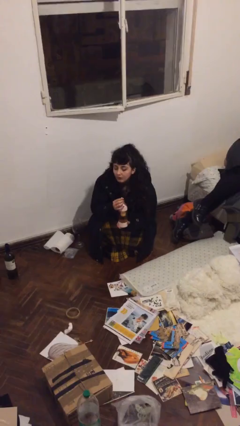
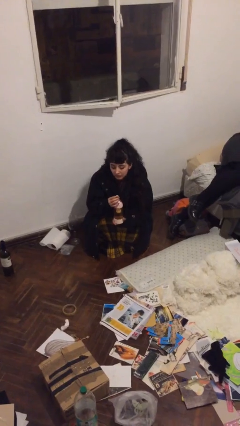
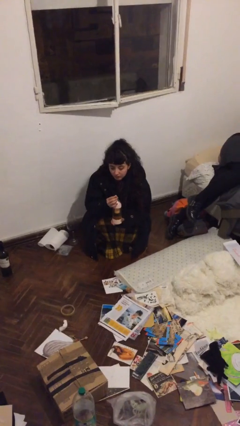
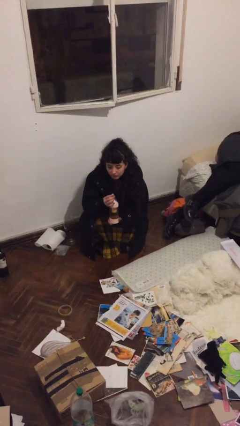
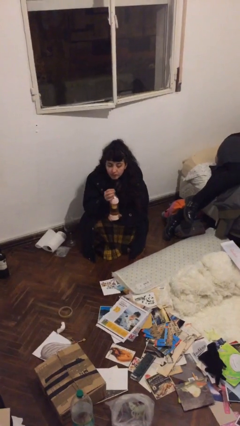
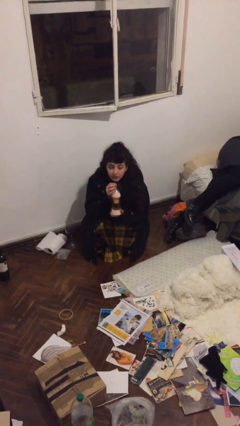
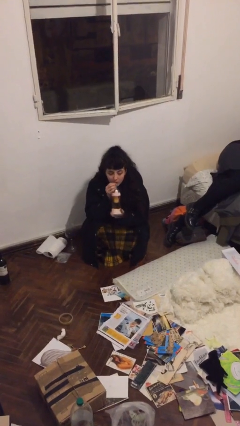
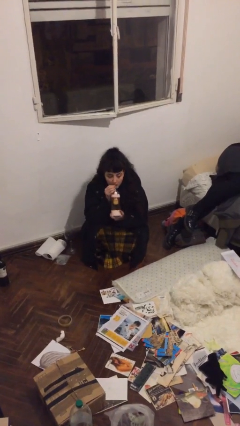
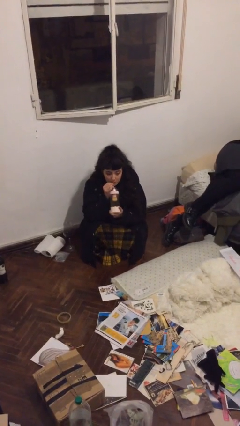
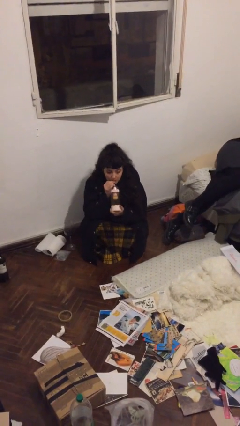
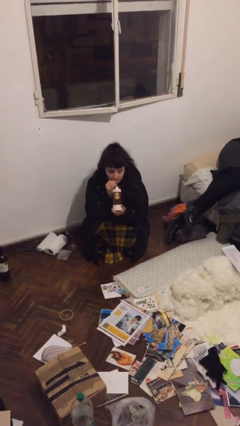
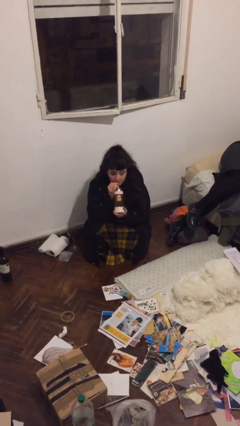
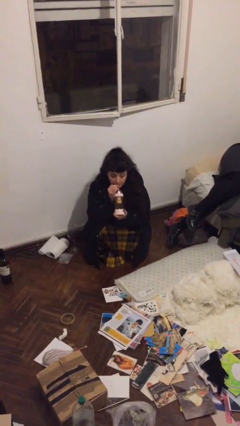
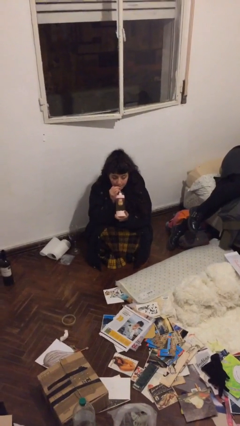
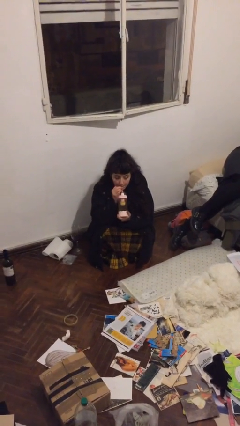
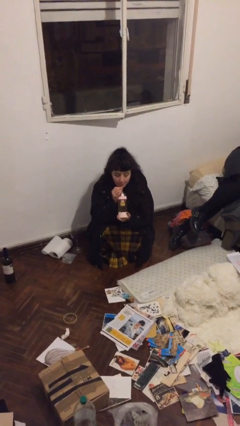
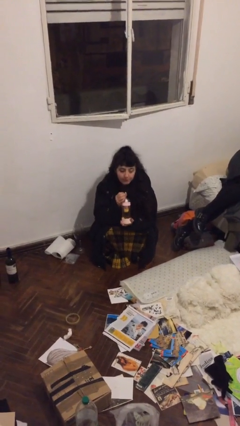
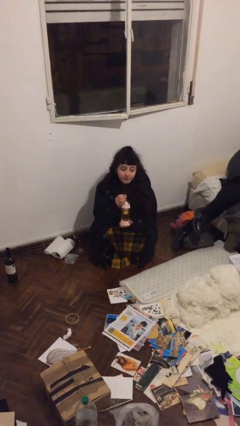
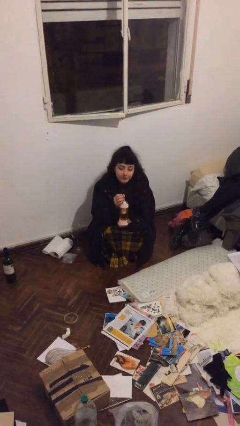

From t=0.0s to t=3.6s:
person drinks from straw

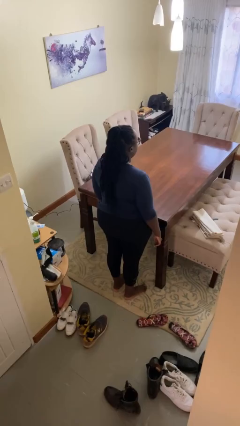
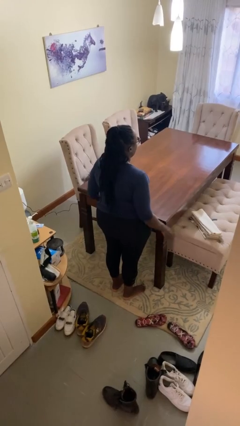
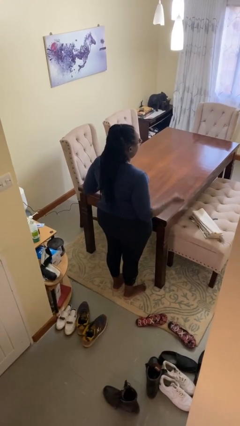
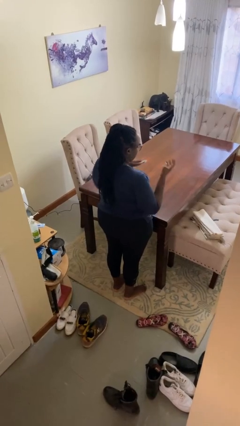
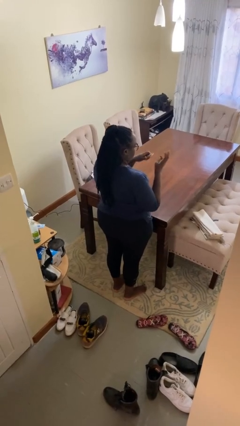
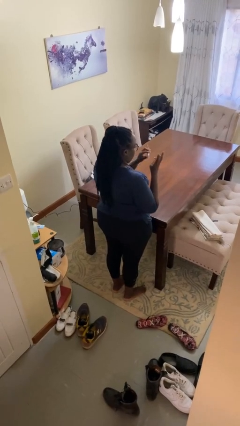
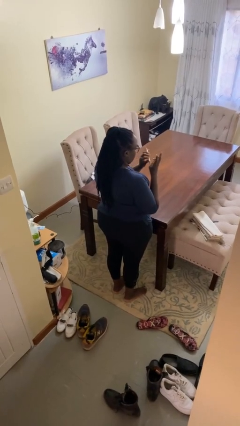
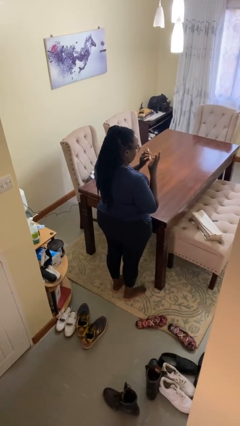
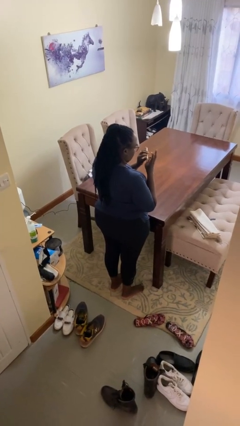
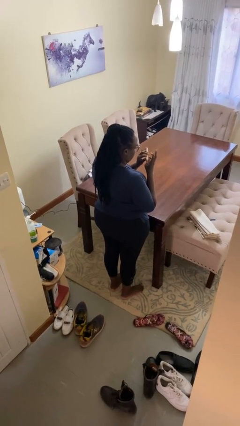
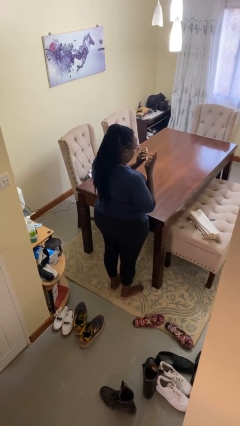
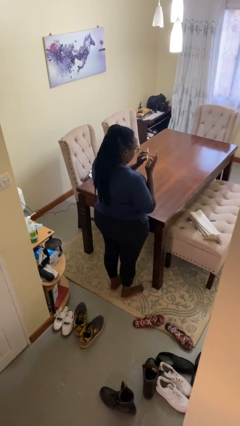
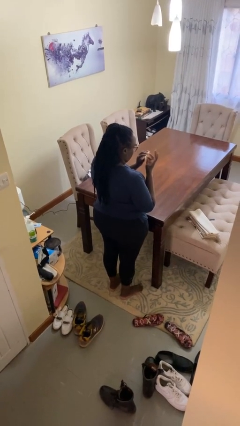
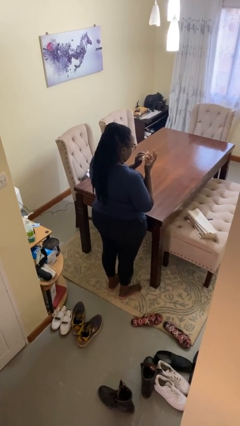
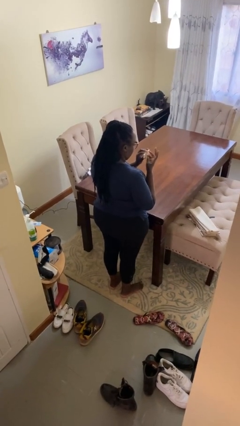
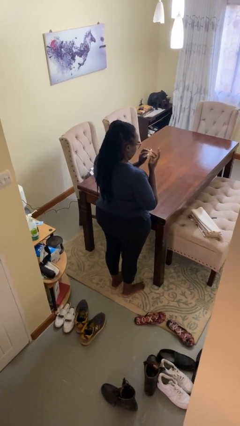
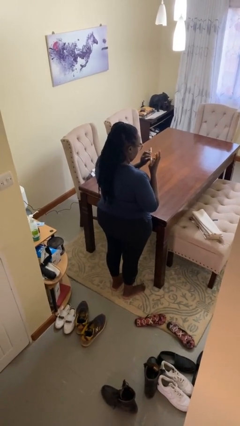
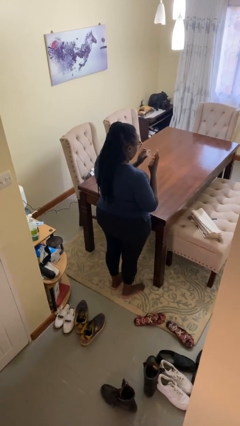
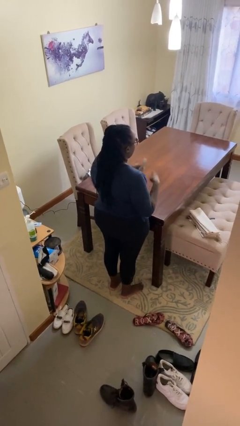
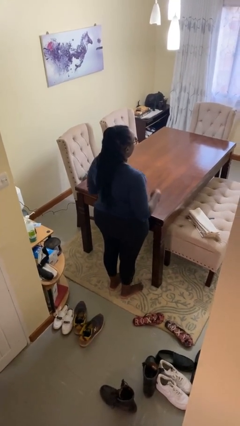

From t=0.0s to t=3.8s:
person files fingernails

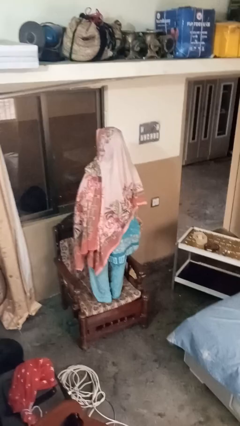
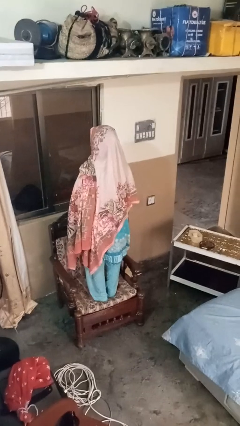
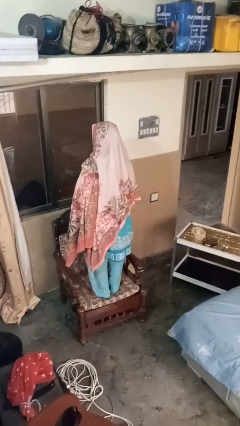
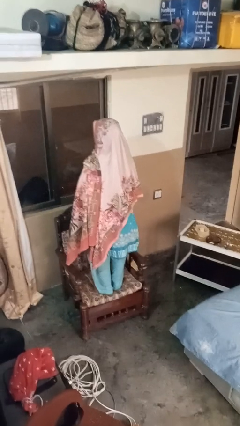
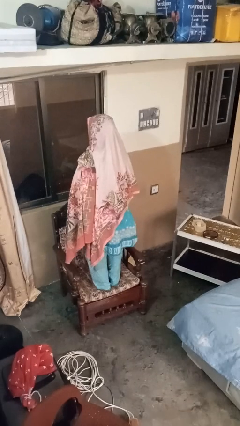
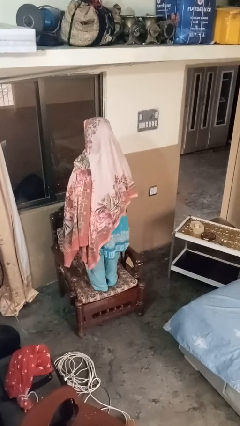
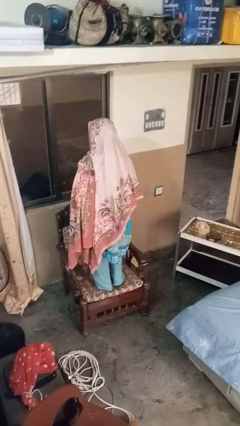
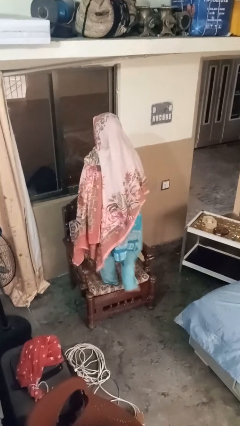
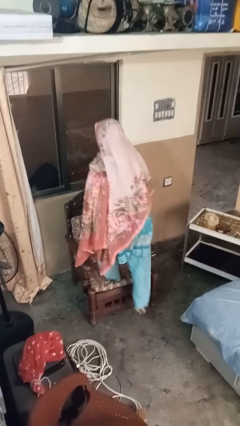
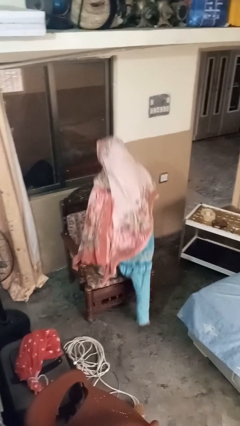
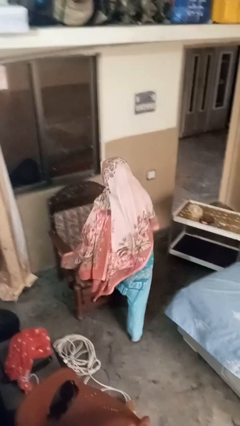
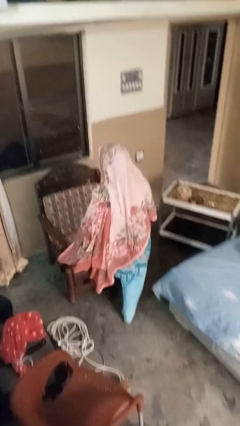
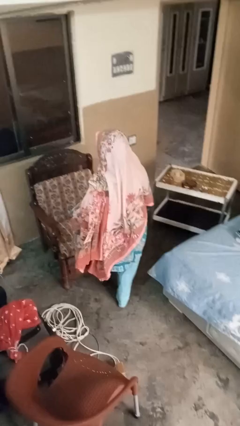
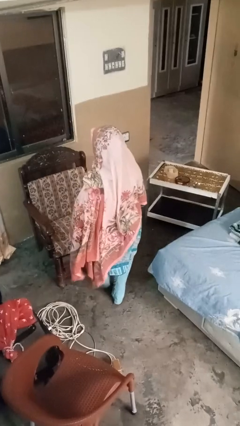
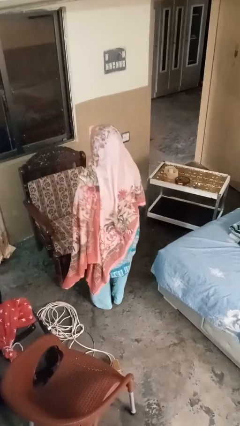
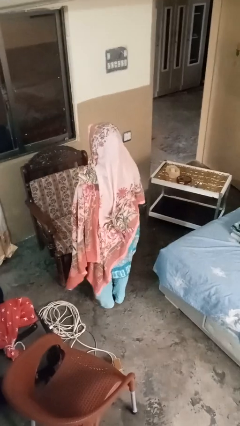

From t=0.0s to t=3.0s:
person climbs off couch

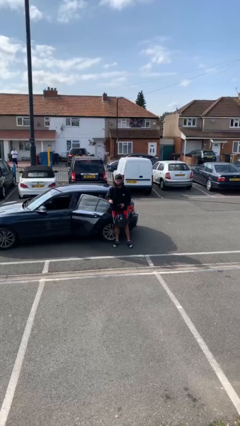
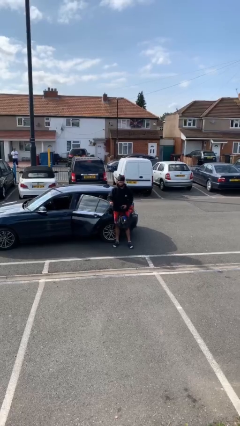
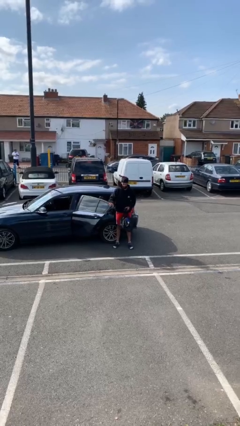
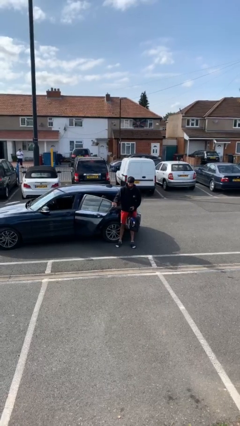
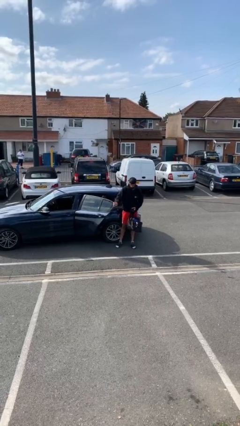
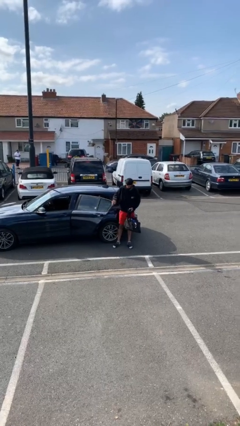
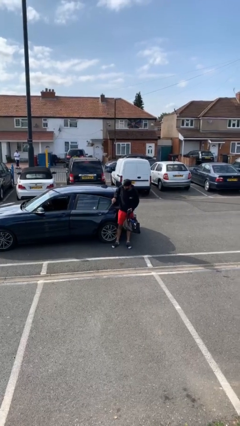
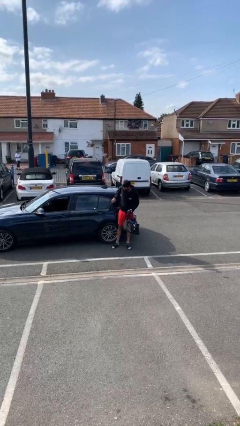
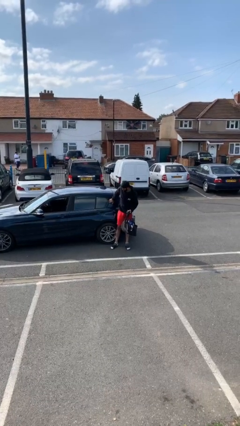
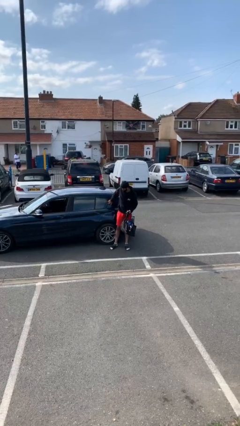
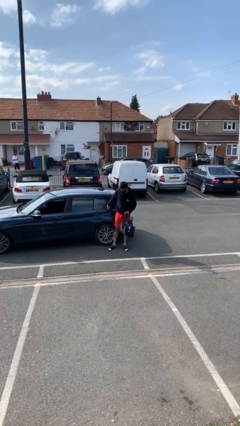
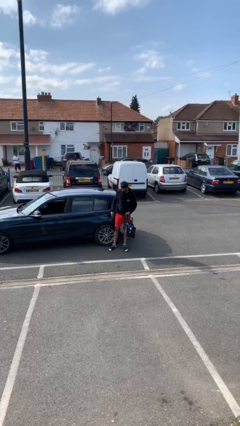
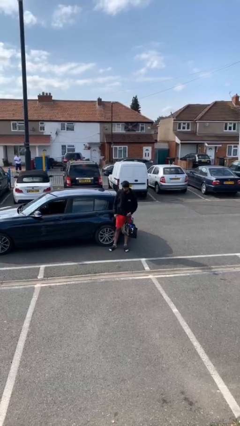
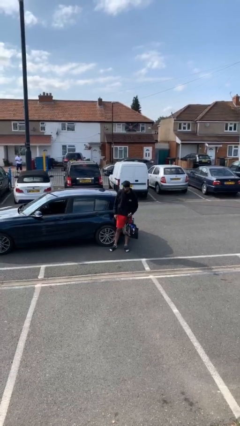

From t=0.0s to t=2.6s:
person closes car door

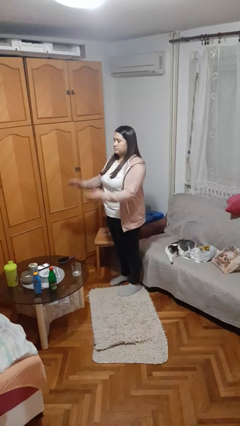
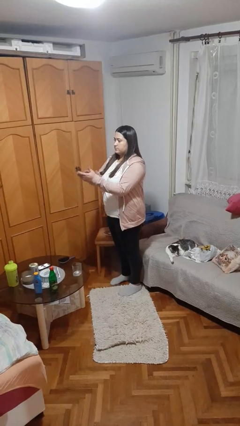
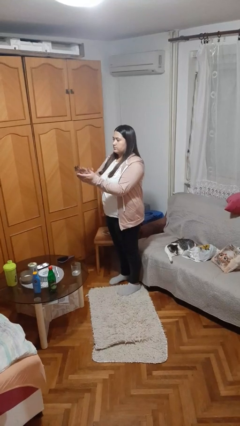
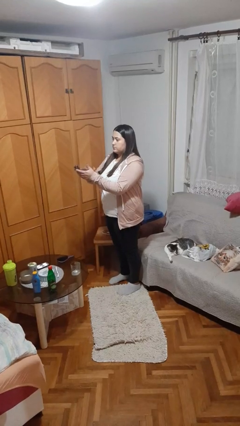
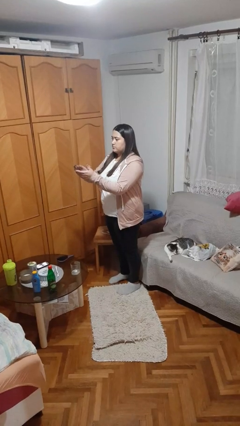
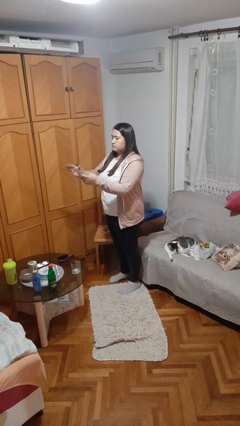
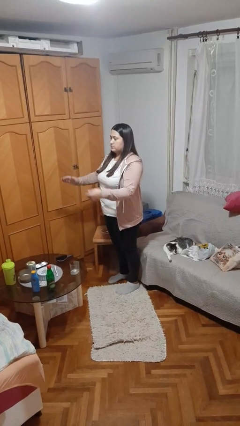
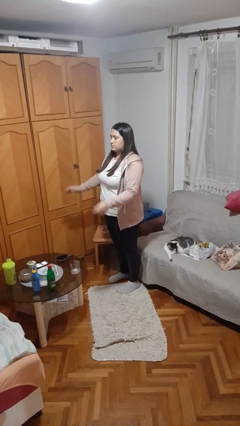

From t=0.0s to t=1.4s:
person claps hands

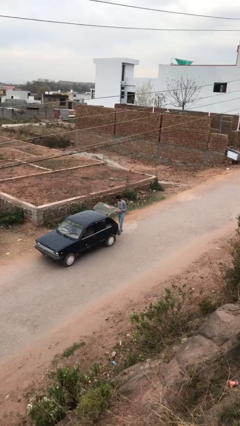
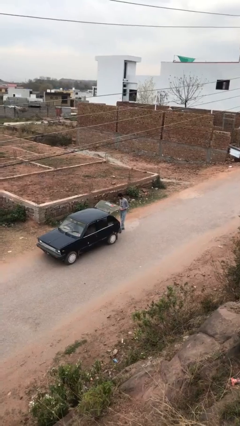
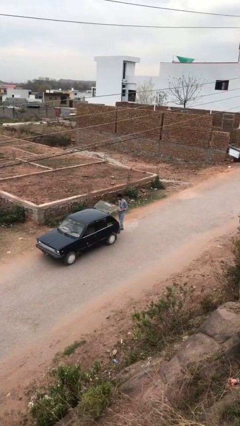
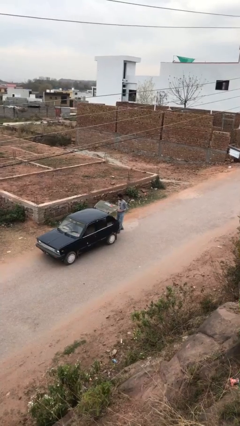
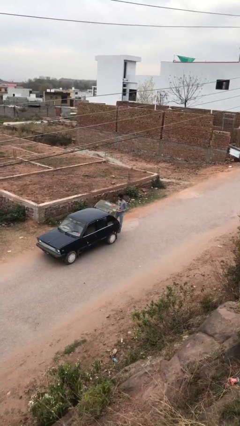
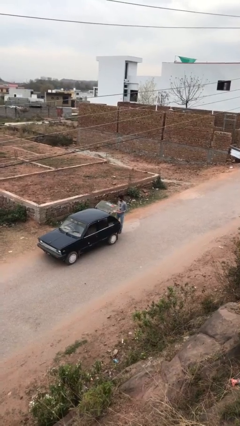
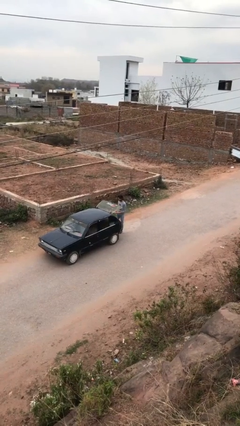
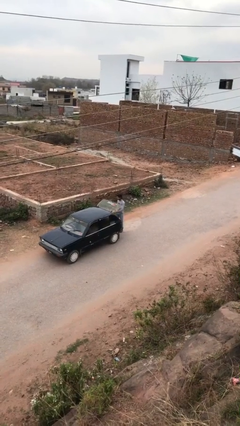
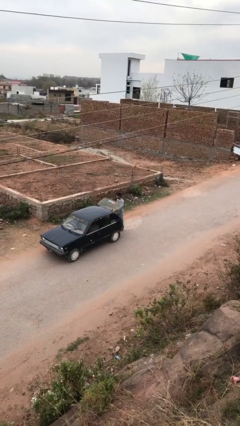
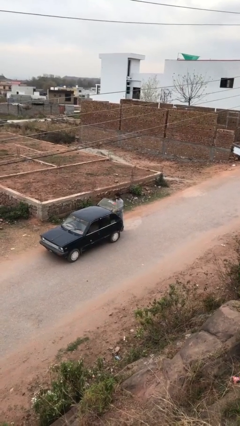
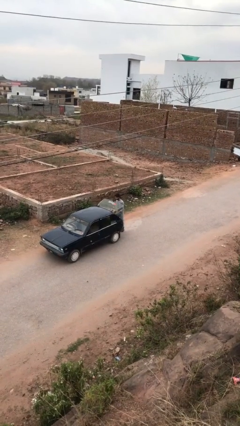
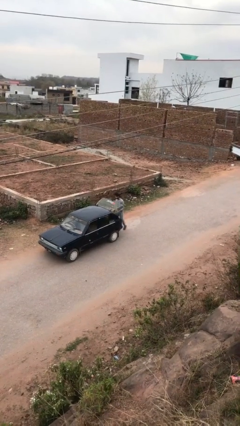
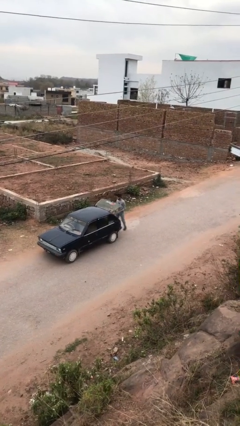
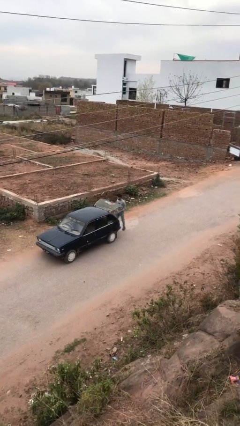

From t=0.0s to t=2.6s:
person loads car

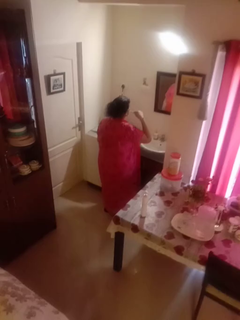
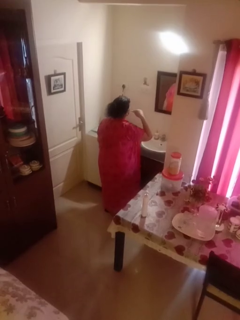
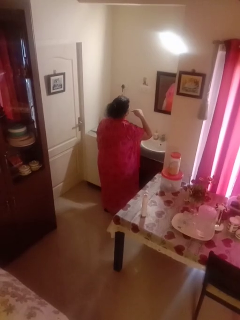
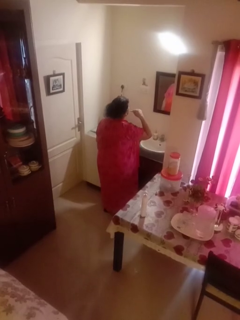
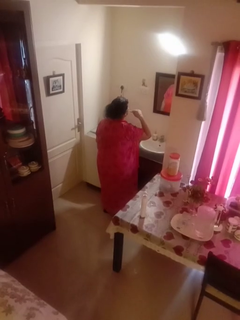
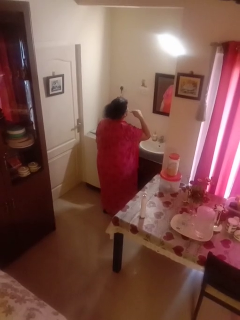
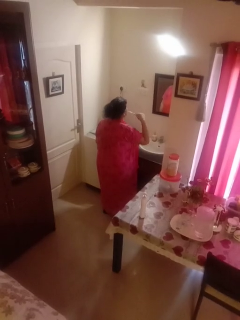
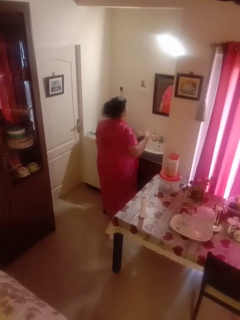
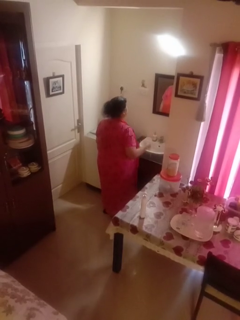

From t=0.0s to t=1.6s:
person brushes teeth
